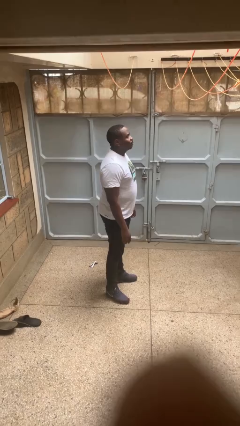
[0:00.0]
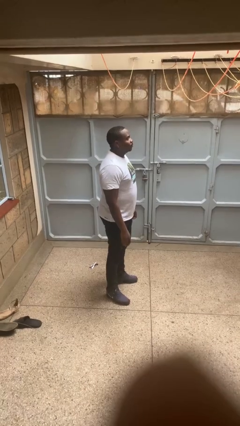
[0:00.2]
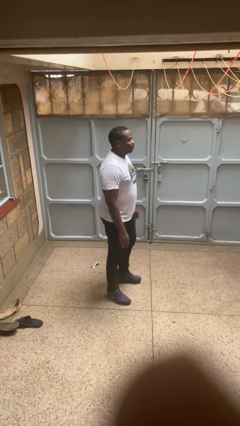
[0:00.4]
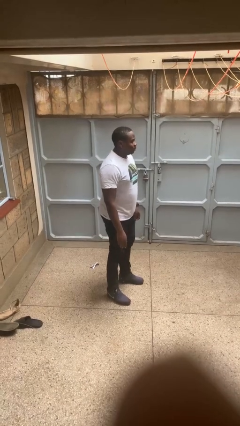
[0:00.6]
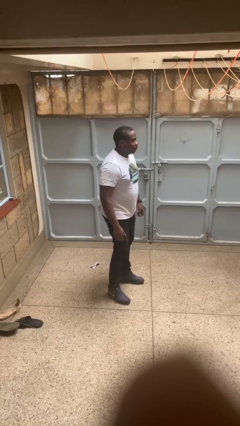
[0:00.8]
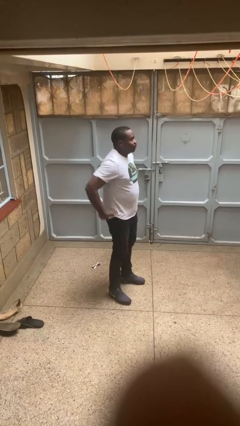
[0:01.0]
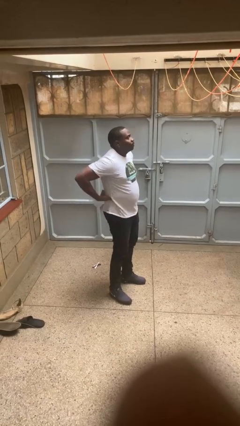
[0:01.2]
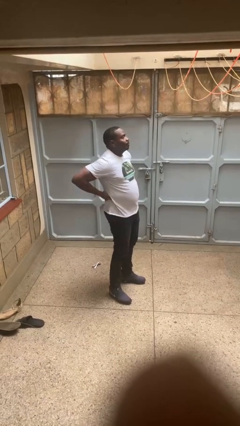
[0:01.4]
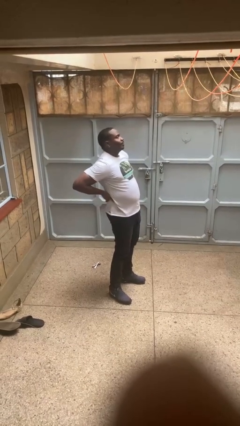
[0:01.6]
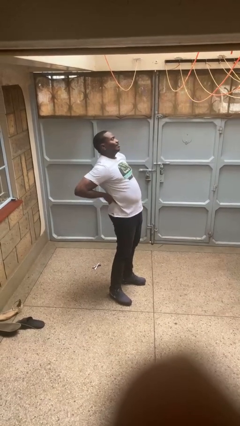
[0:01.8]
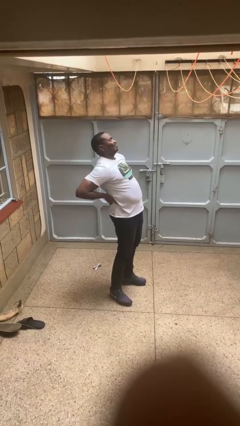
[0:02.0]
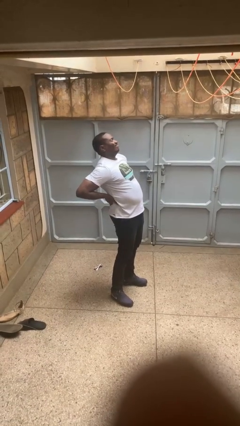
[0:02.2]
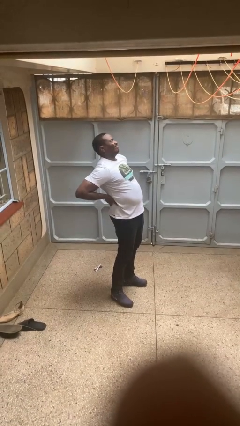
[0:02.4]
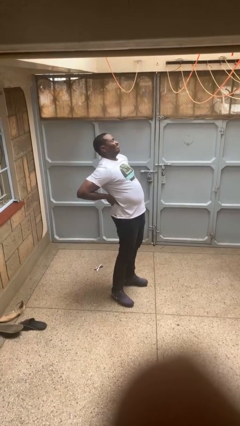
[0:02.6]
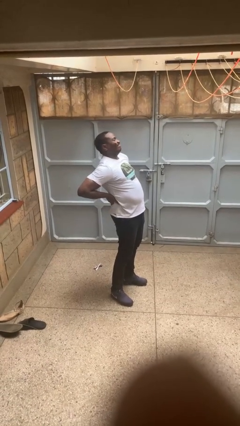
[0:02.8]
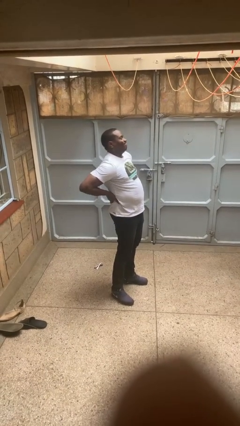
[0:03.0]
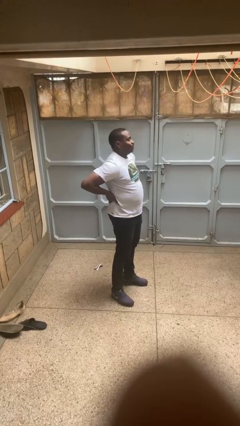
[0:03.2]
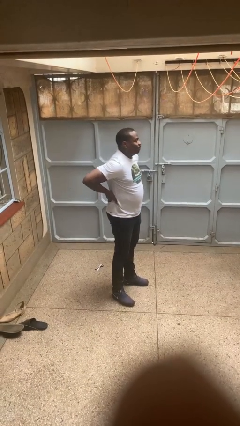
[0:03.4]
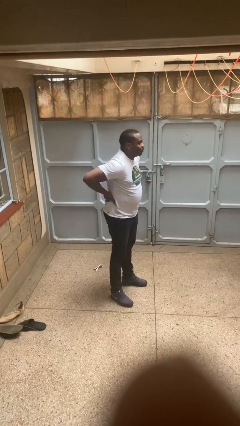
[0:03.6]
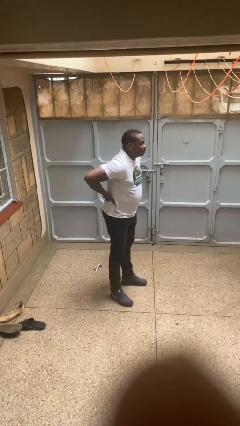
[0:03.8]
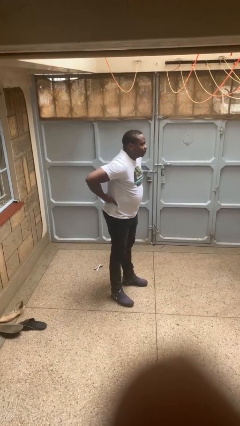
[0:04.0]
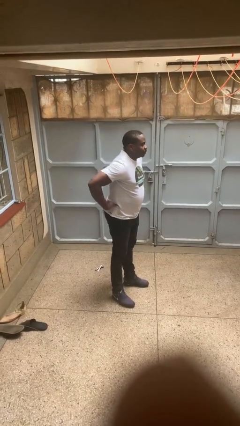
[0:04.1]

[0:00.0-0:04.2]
person stretches back

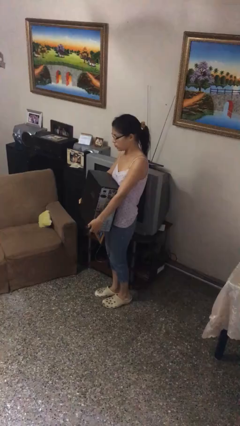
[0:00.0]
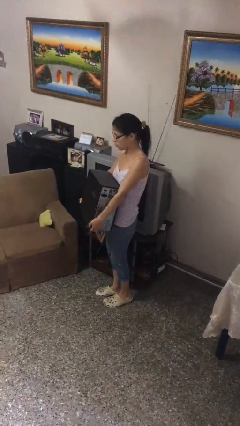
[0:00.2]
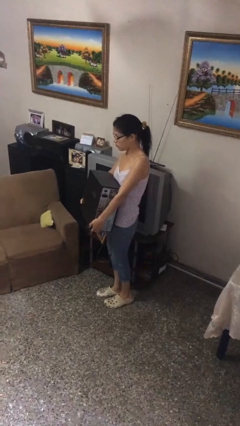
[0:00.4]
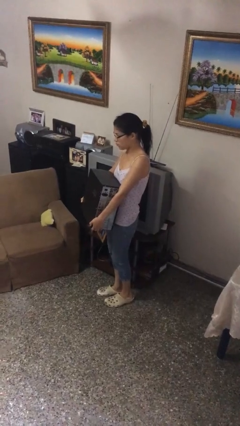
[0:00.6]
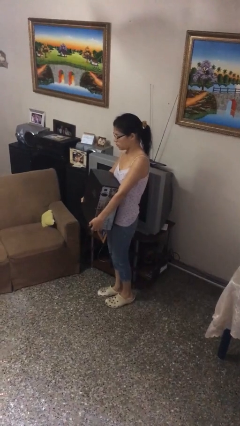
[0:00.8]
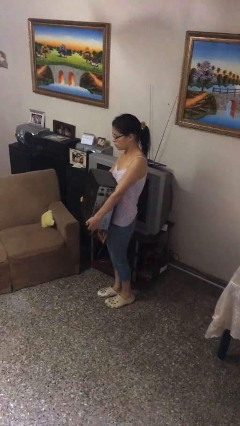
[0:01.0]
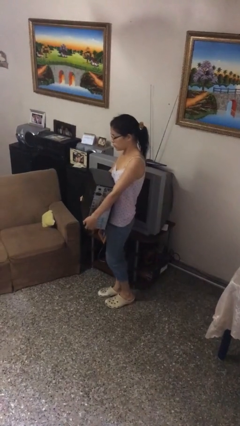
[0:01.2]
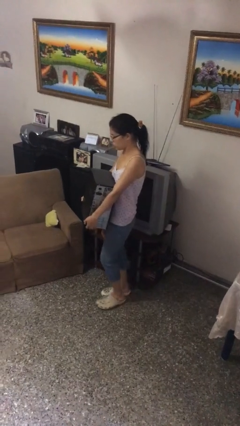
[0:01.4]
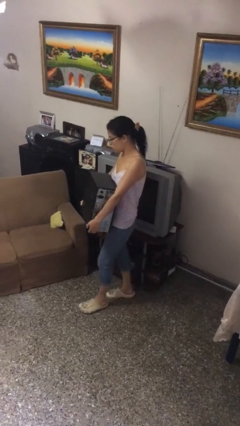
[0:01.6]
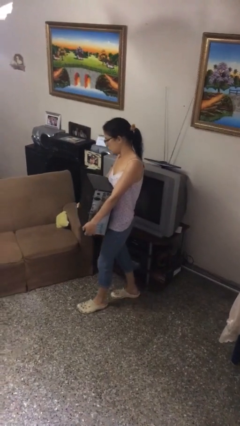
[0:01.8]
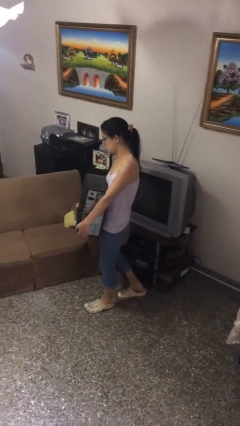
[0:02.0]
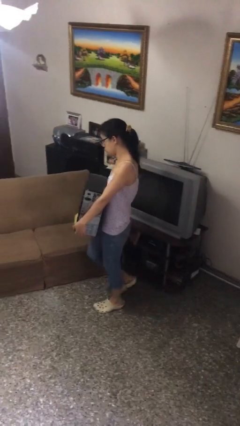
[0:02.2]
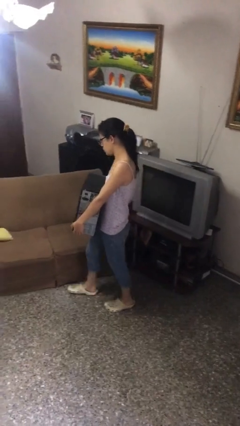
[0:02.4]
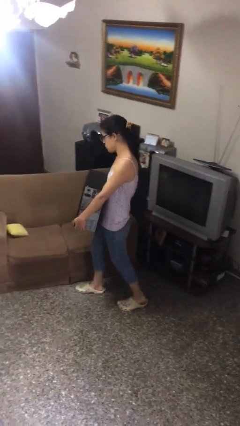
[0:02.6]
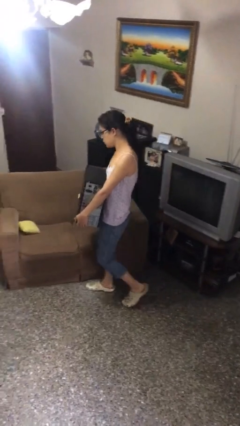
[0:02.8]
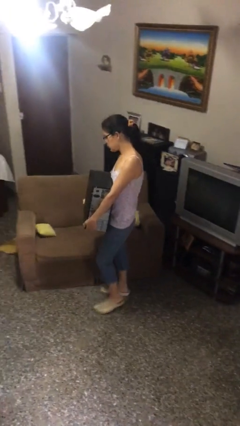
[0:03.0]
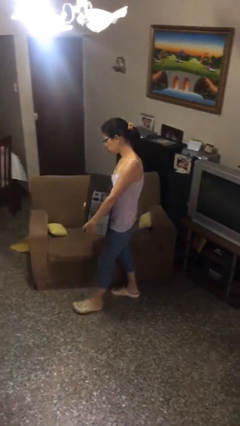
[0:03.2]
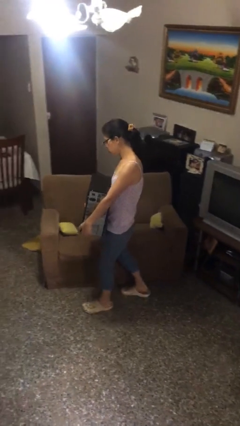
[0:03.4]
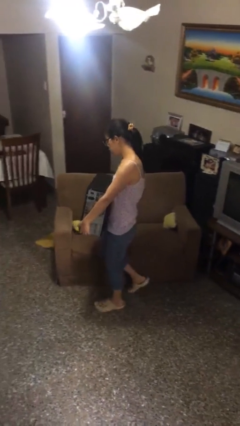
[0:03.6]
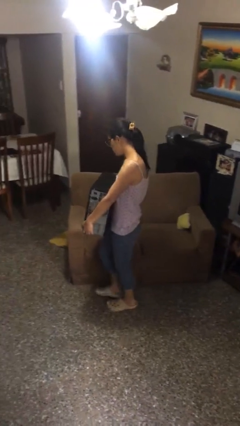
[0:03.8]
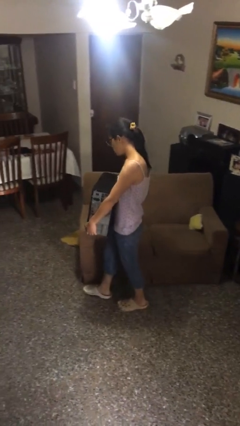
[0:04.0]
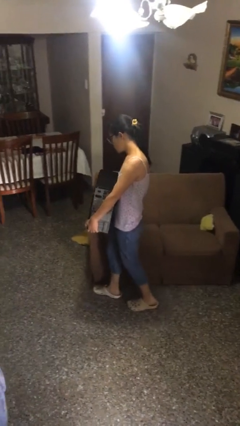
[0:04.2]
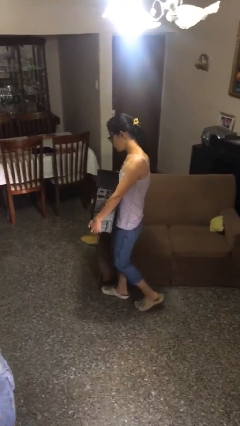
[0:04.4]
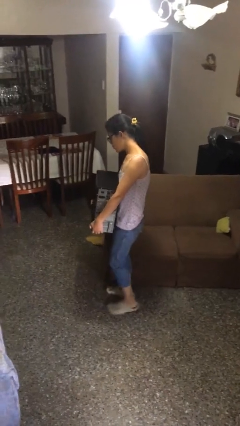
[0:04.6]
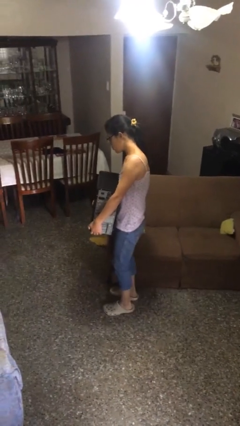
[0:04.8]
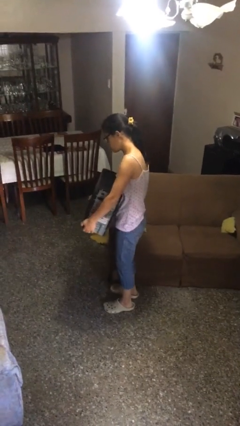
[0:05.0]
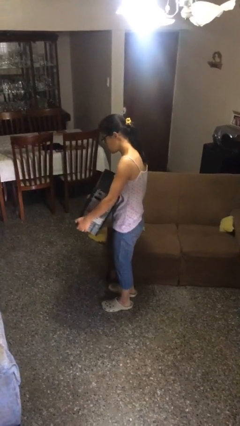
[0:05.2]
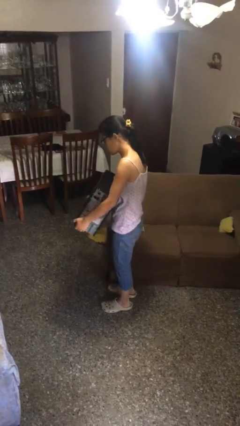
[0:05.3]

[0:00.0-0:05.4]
person carries heavy object

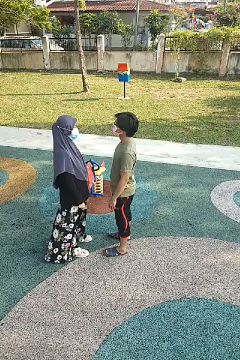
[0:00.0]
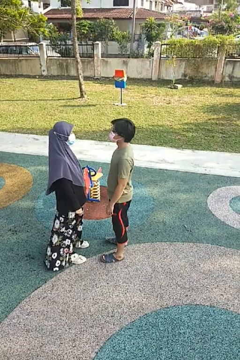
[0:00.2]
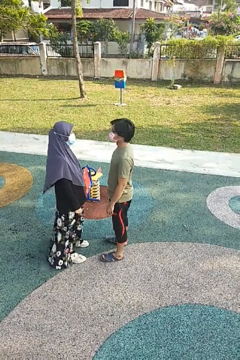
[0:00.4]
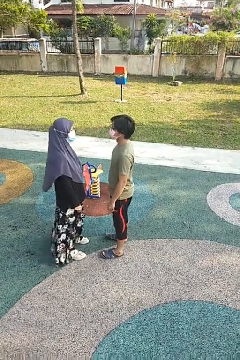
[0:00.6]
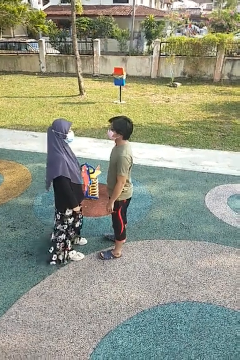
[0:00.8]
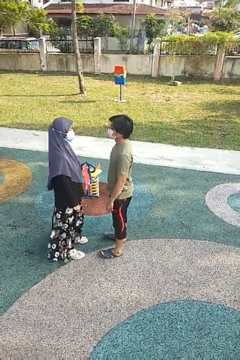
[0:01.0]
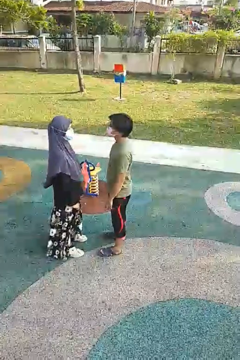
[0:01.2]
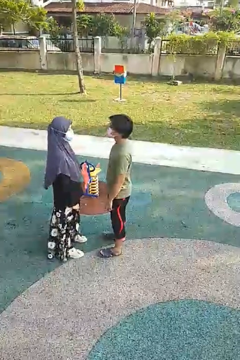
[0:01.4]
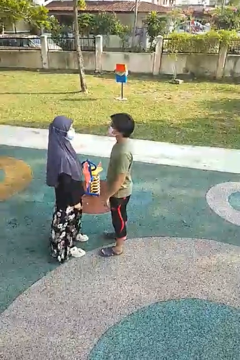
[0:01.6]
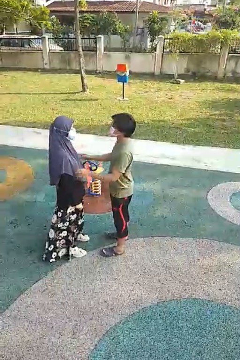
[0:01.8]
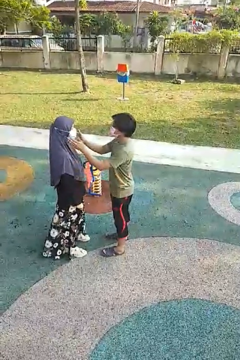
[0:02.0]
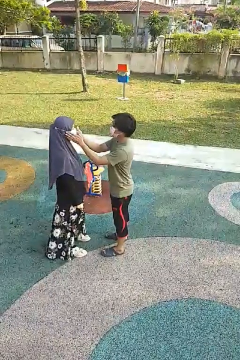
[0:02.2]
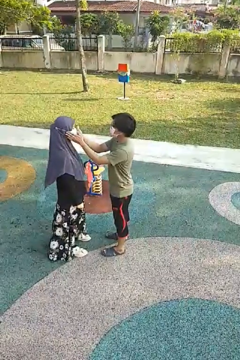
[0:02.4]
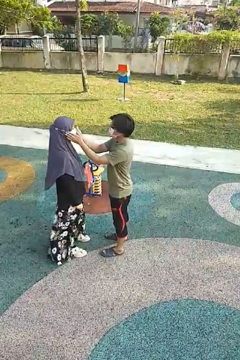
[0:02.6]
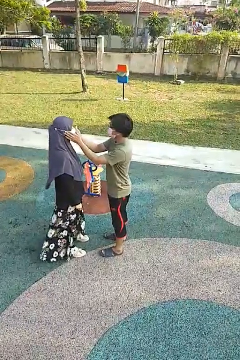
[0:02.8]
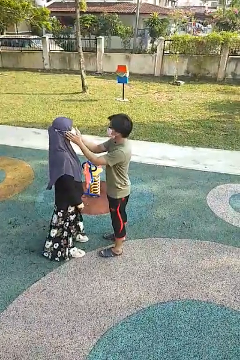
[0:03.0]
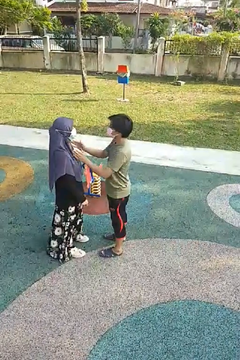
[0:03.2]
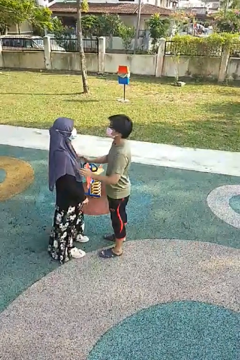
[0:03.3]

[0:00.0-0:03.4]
person touches face of person

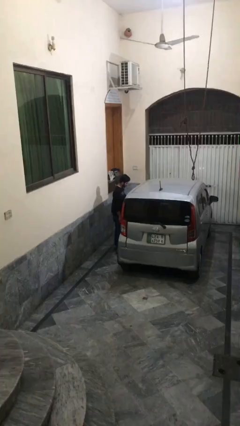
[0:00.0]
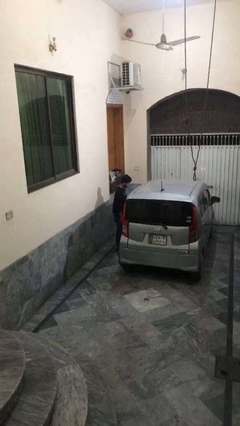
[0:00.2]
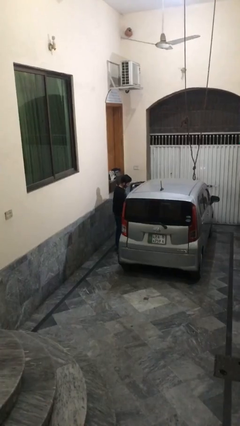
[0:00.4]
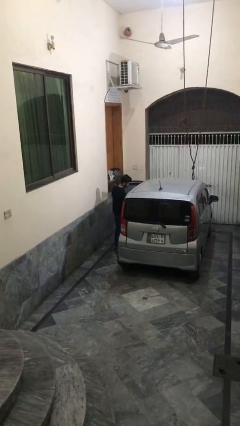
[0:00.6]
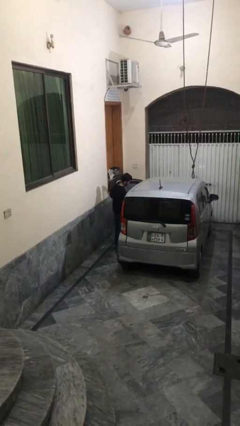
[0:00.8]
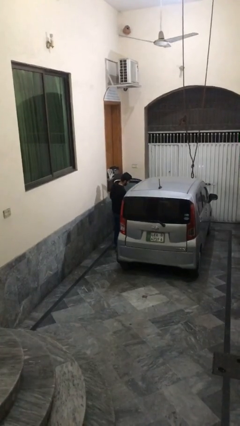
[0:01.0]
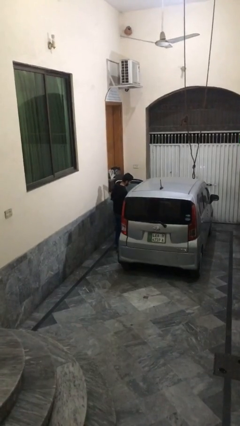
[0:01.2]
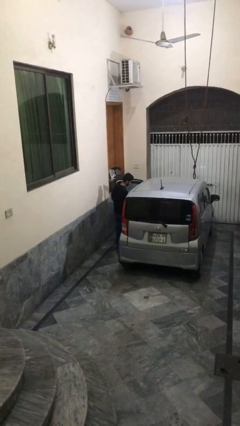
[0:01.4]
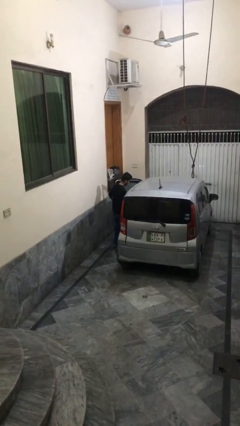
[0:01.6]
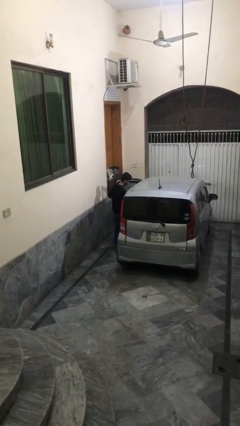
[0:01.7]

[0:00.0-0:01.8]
person opens car door

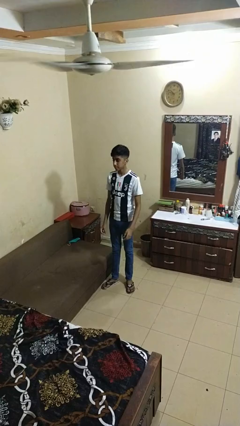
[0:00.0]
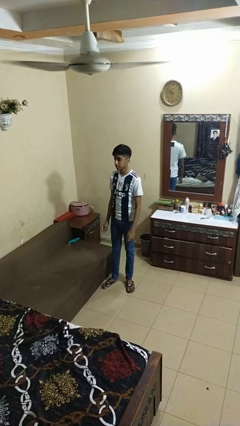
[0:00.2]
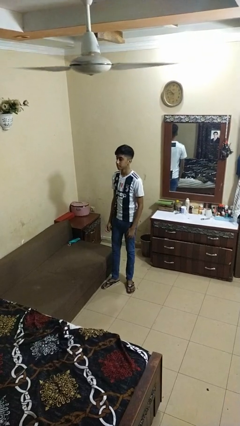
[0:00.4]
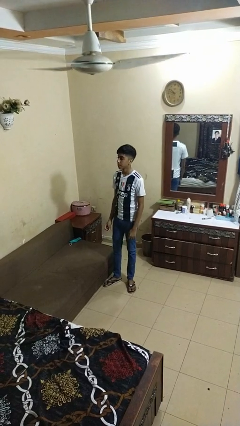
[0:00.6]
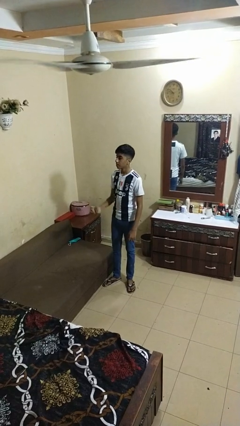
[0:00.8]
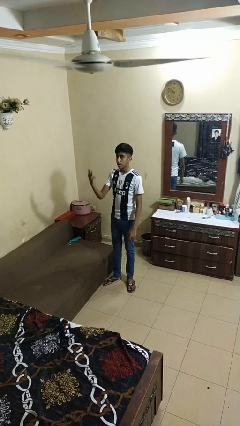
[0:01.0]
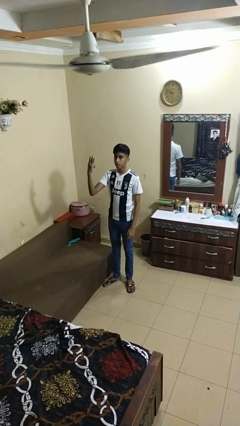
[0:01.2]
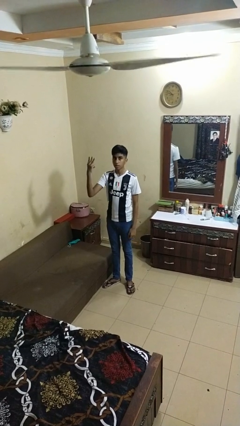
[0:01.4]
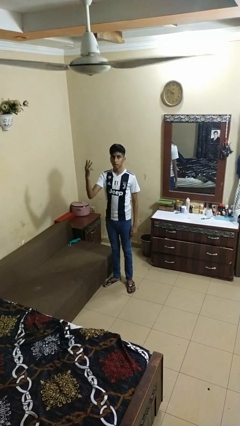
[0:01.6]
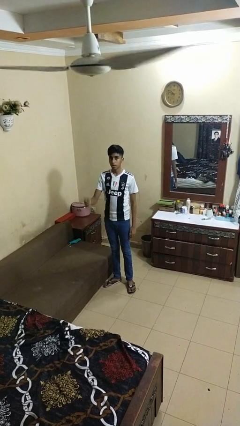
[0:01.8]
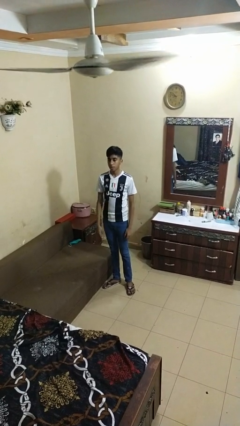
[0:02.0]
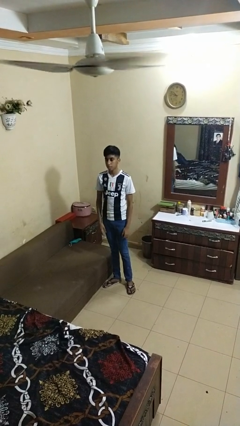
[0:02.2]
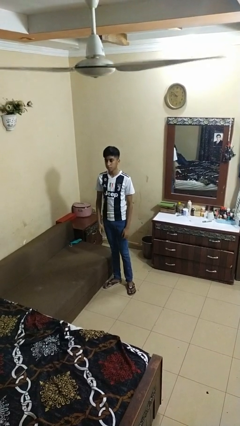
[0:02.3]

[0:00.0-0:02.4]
person gestures number three

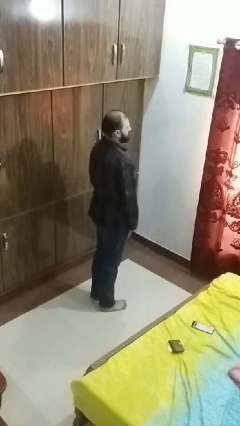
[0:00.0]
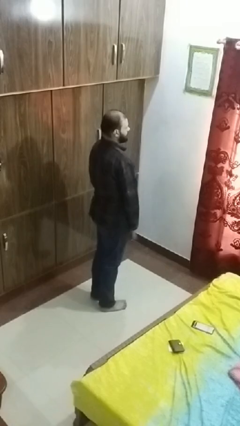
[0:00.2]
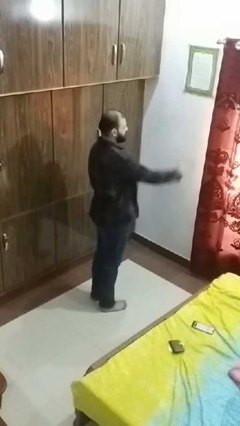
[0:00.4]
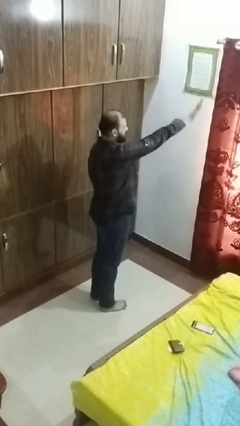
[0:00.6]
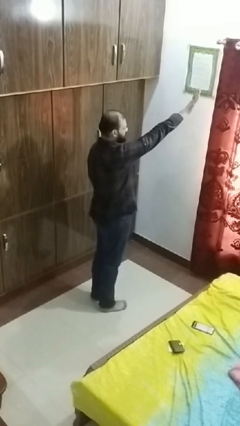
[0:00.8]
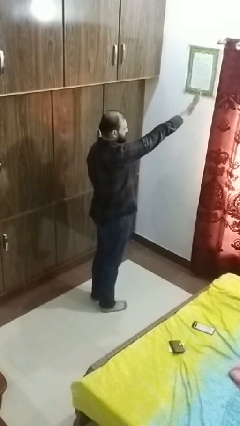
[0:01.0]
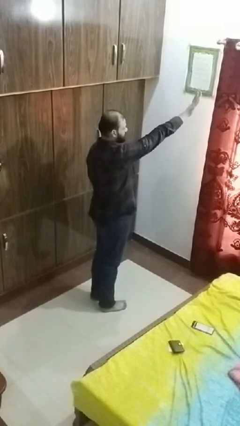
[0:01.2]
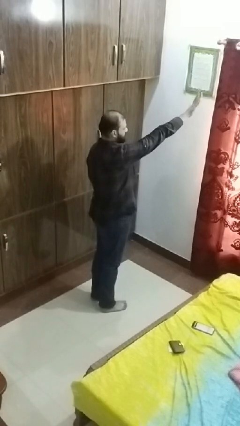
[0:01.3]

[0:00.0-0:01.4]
person gestures stop
